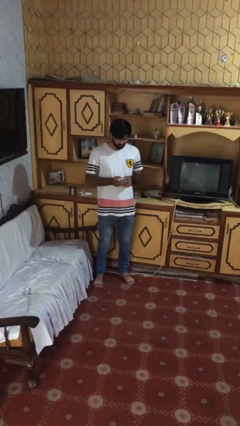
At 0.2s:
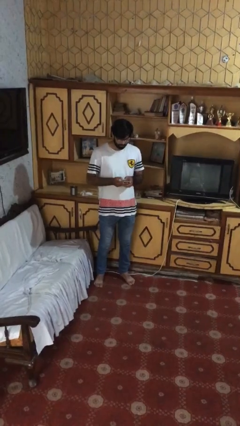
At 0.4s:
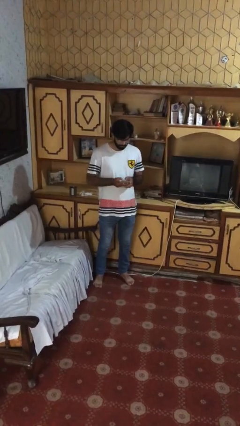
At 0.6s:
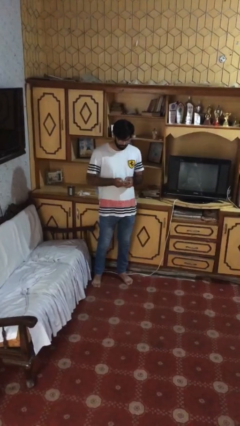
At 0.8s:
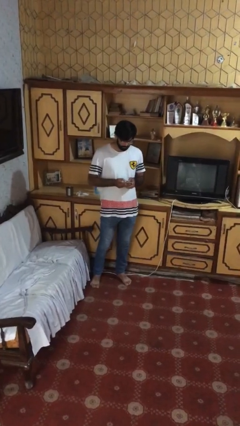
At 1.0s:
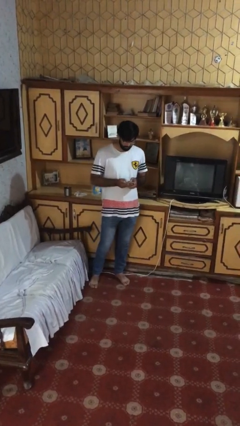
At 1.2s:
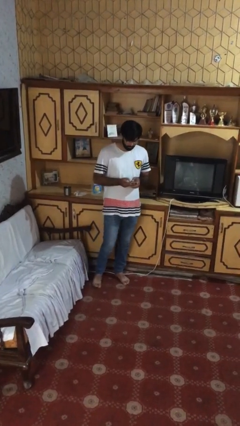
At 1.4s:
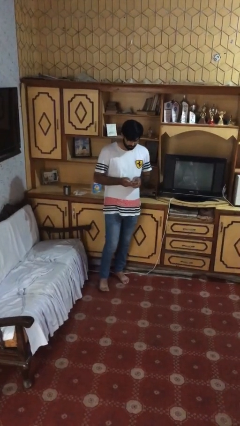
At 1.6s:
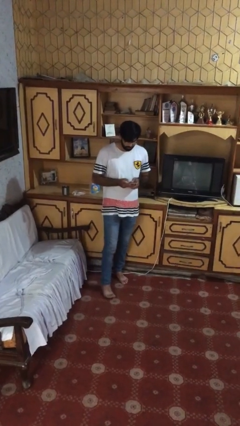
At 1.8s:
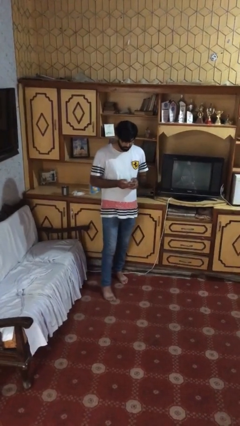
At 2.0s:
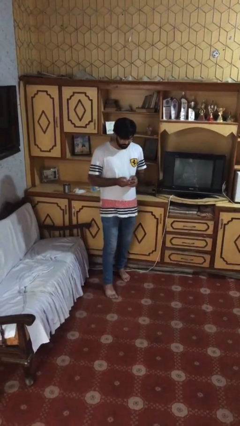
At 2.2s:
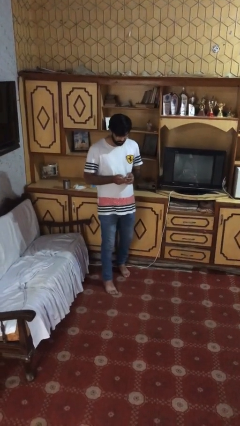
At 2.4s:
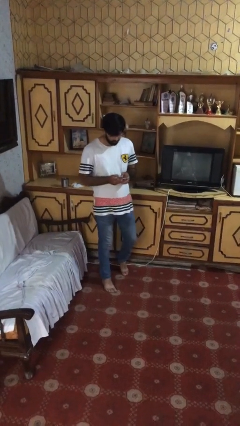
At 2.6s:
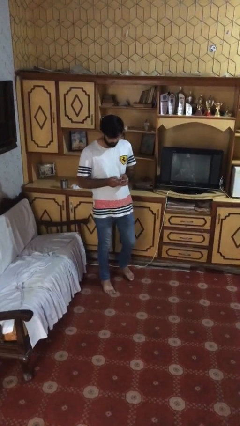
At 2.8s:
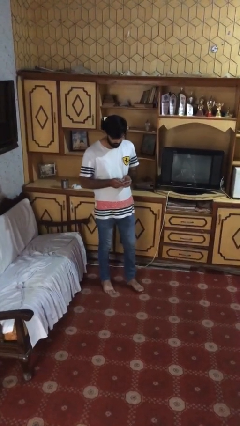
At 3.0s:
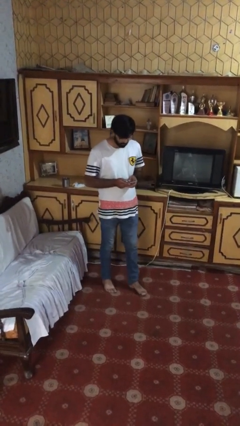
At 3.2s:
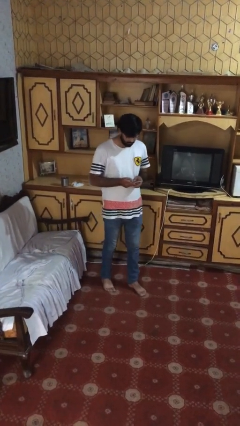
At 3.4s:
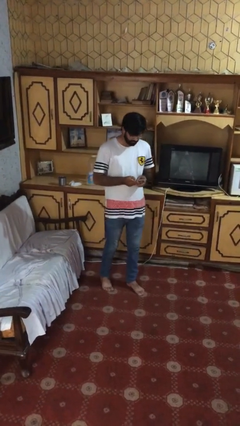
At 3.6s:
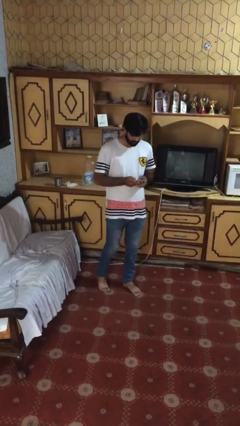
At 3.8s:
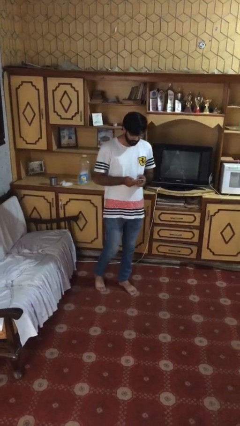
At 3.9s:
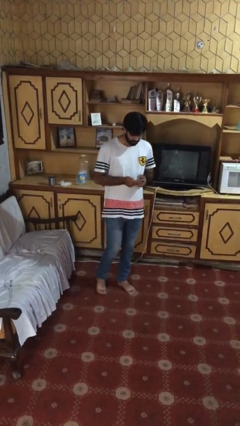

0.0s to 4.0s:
person texts on phone

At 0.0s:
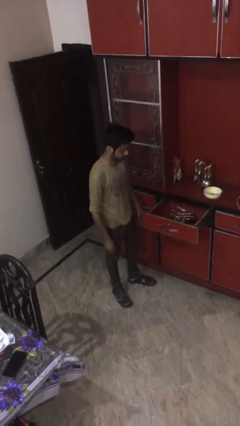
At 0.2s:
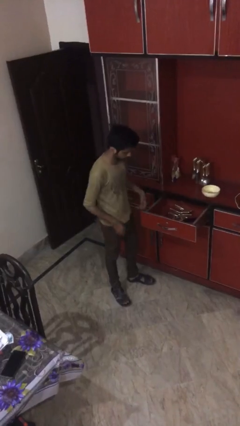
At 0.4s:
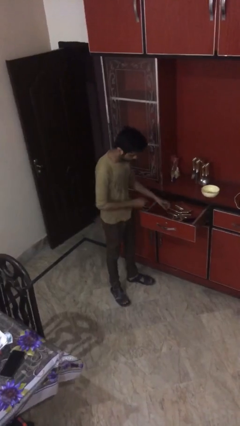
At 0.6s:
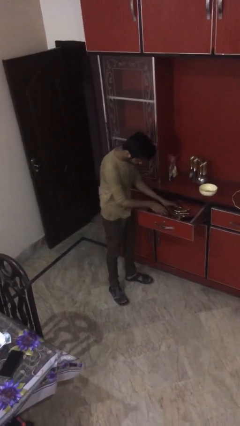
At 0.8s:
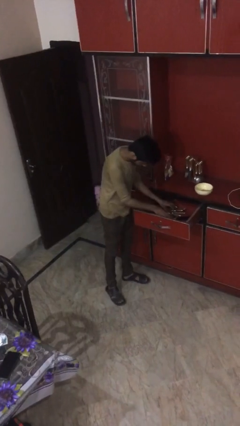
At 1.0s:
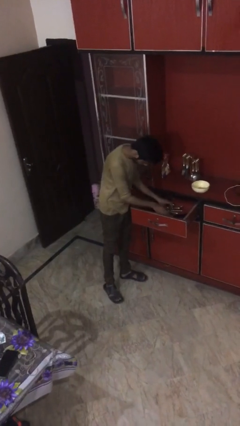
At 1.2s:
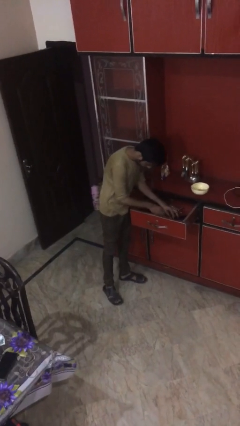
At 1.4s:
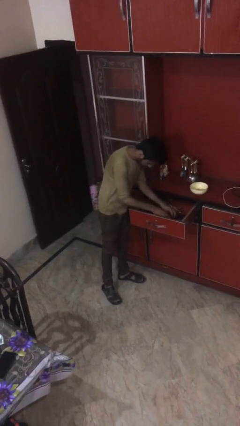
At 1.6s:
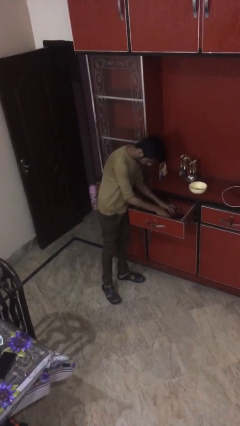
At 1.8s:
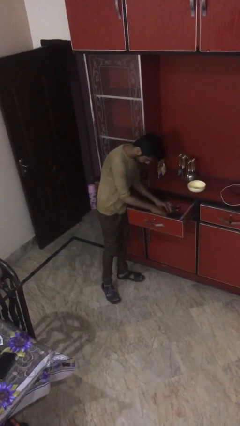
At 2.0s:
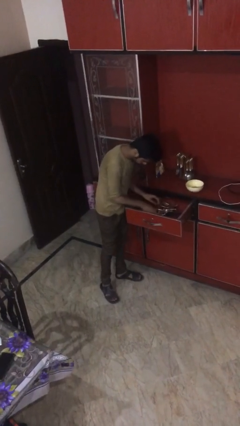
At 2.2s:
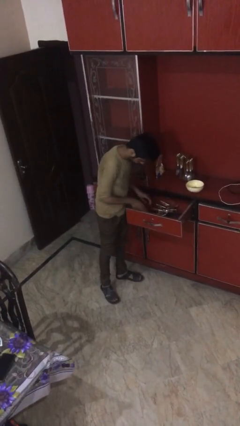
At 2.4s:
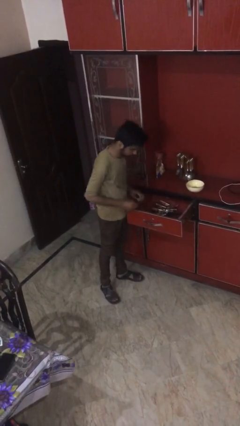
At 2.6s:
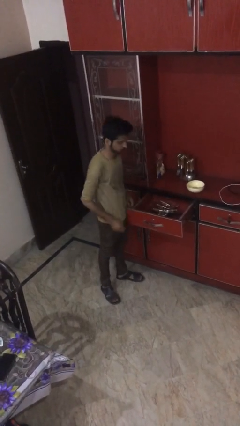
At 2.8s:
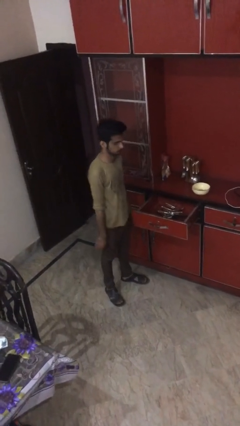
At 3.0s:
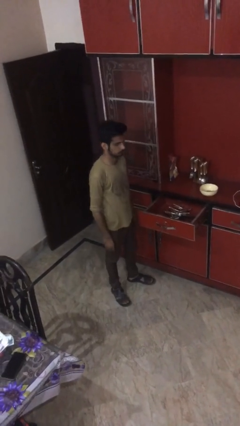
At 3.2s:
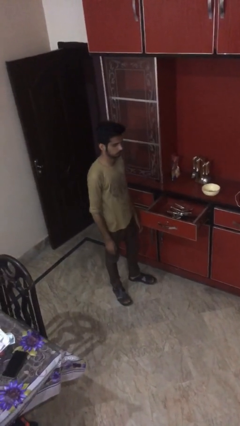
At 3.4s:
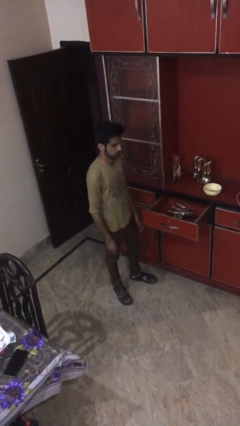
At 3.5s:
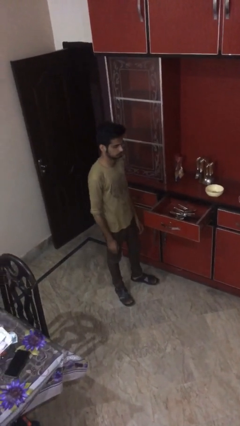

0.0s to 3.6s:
person searches in kitchen drawer

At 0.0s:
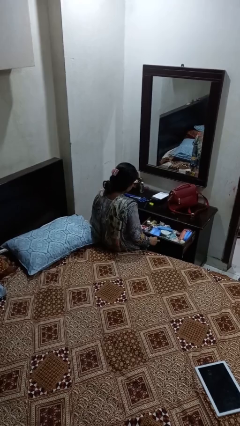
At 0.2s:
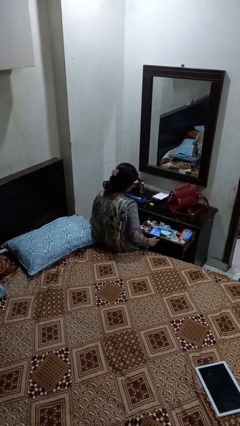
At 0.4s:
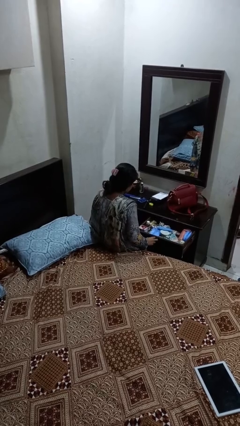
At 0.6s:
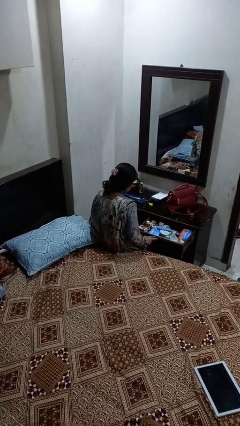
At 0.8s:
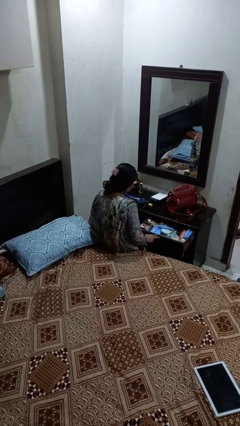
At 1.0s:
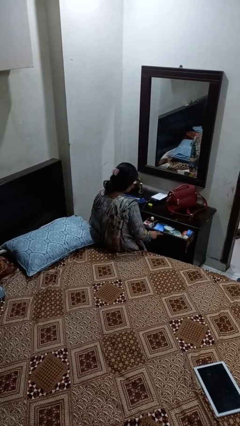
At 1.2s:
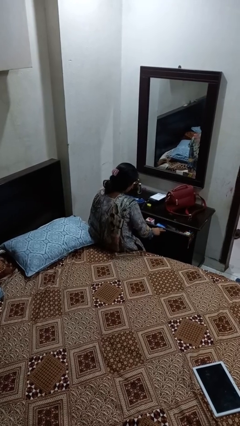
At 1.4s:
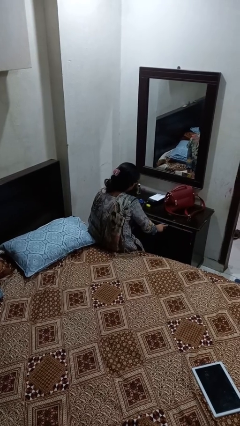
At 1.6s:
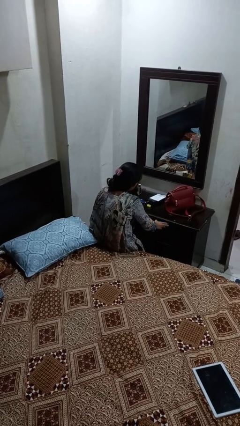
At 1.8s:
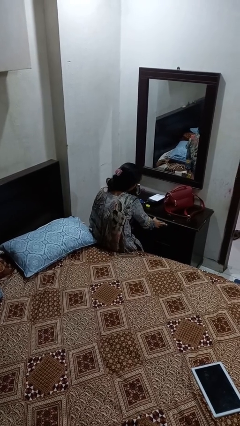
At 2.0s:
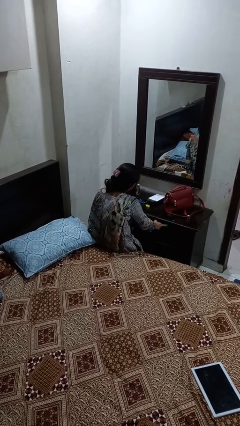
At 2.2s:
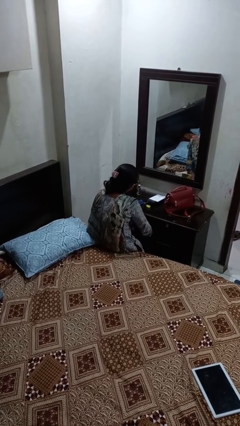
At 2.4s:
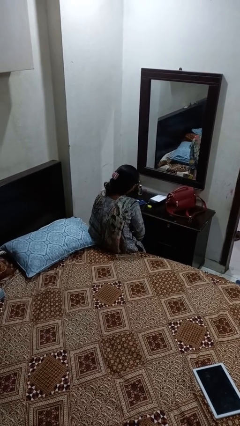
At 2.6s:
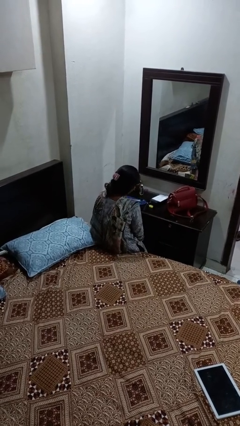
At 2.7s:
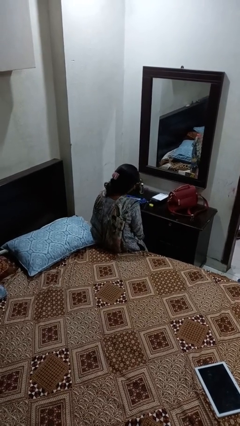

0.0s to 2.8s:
person closes dresser drawer

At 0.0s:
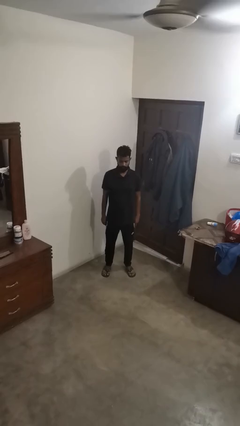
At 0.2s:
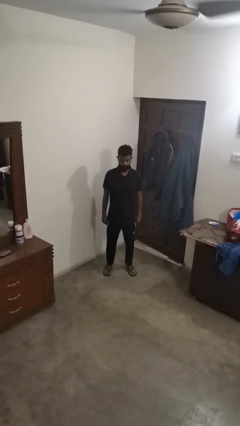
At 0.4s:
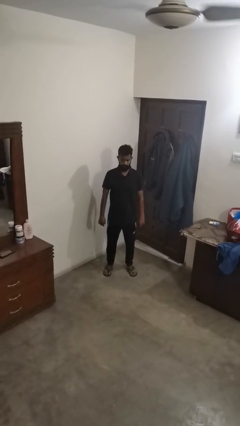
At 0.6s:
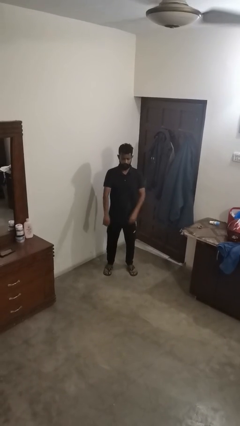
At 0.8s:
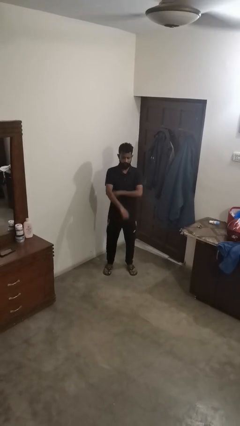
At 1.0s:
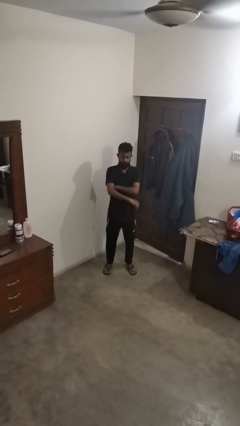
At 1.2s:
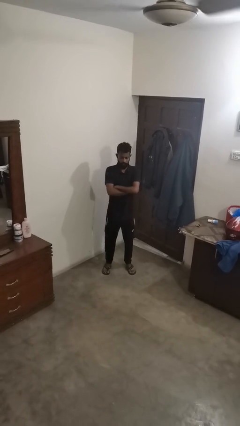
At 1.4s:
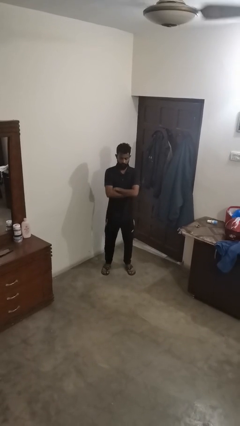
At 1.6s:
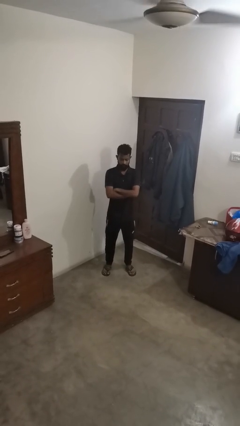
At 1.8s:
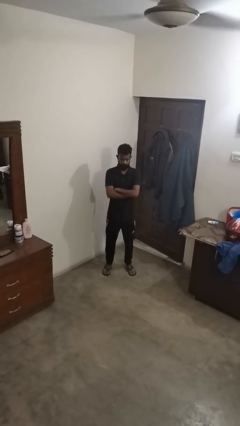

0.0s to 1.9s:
person crosses arms

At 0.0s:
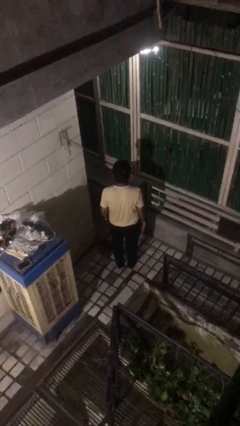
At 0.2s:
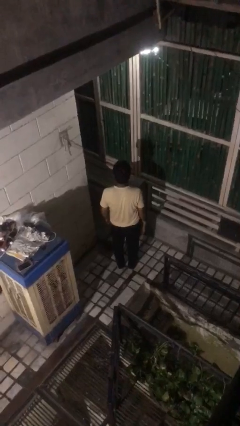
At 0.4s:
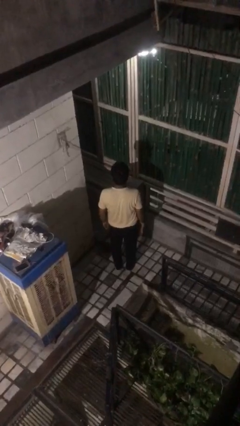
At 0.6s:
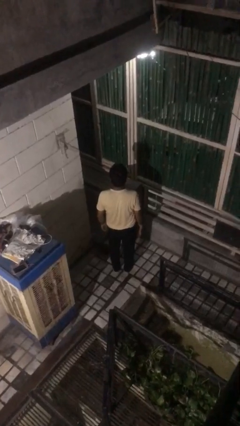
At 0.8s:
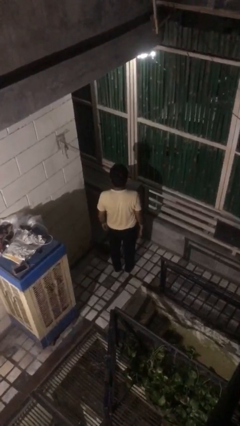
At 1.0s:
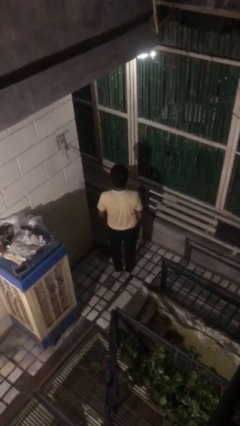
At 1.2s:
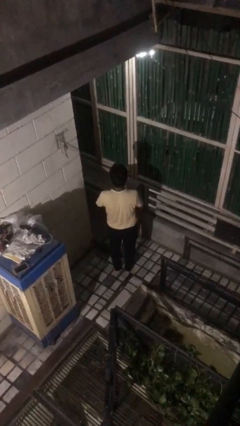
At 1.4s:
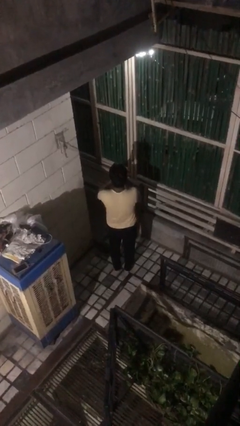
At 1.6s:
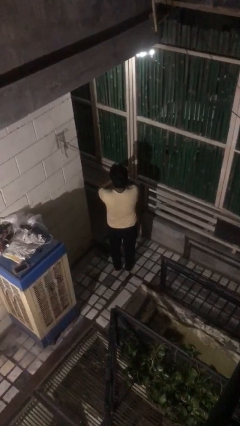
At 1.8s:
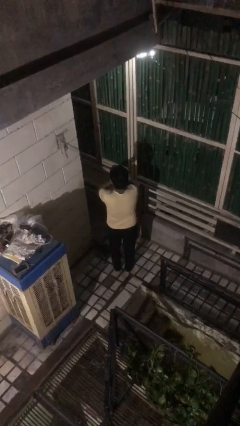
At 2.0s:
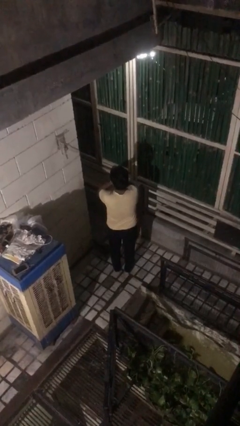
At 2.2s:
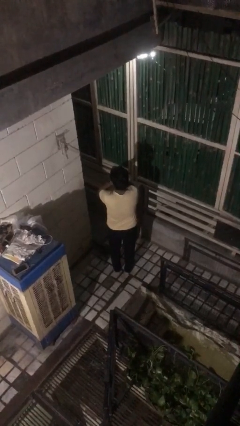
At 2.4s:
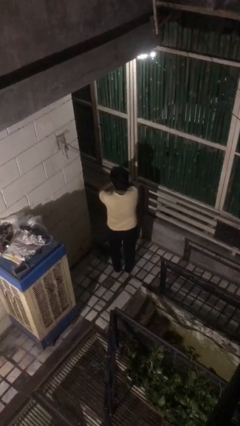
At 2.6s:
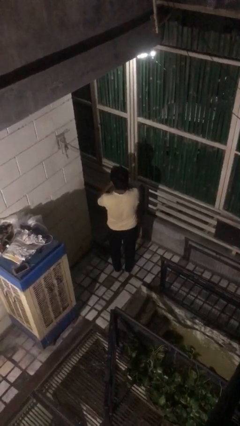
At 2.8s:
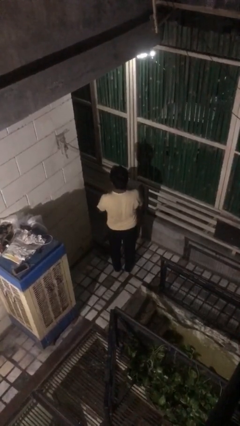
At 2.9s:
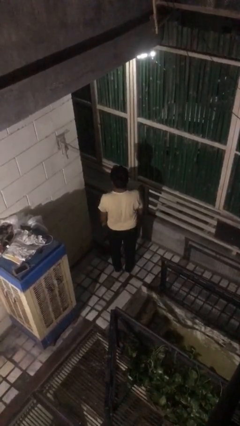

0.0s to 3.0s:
person covers face with hands

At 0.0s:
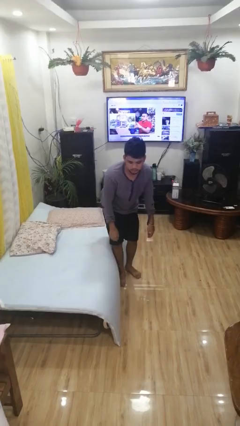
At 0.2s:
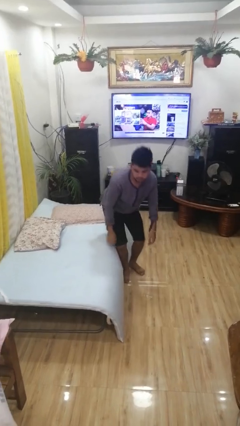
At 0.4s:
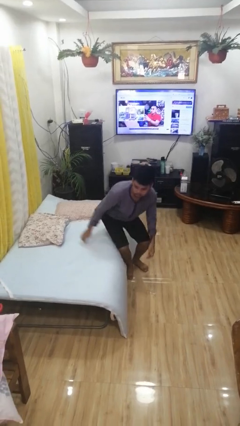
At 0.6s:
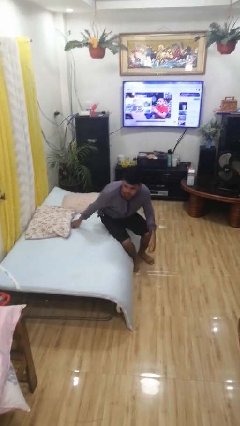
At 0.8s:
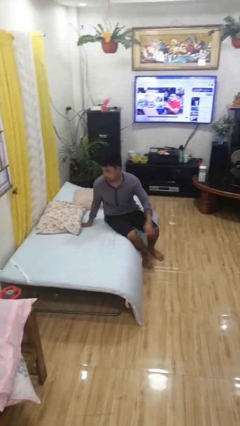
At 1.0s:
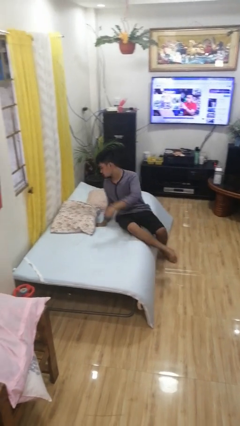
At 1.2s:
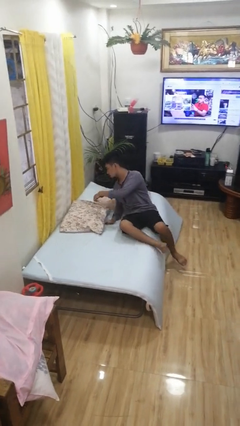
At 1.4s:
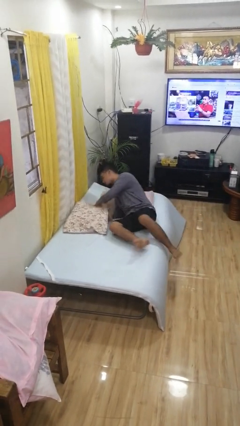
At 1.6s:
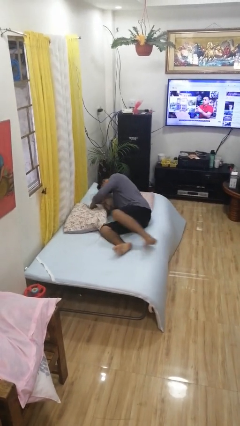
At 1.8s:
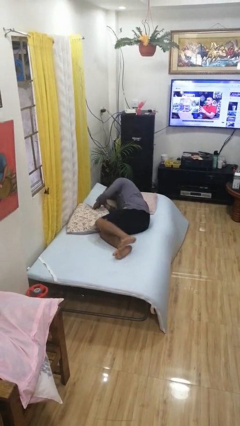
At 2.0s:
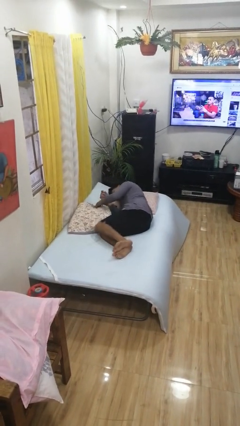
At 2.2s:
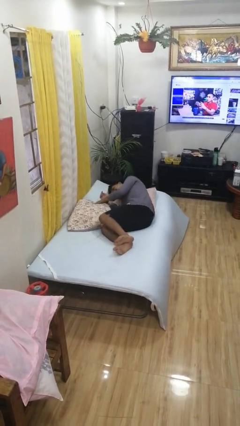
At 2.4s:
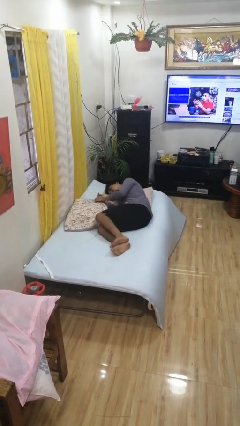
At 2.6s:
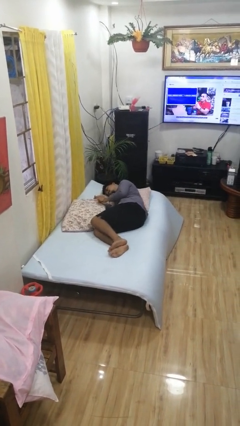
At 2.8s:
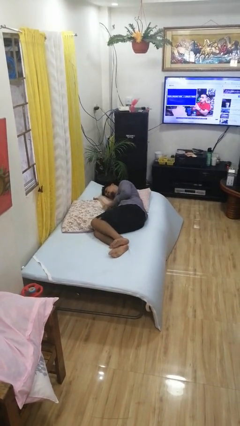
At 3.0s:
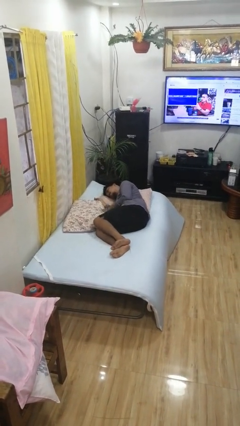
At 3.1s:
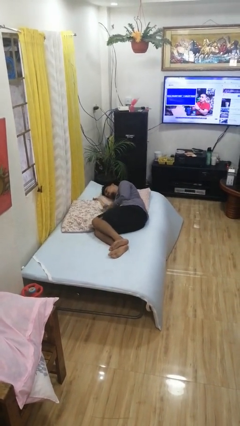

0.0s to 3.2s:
person lies down on bed
